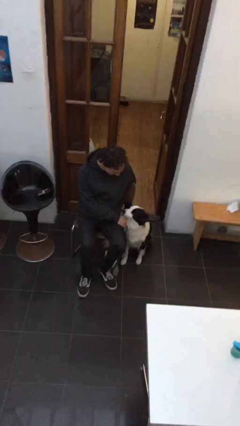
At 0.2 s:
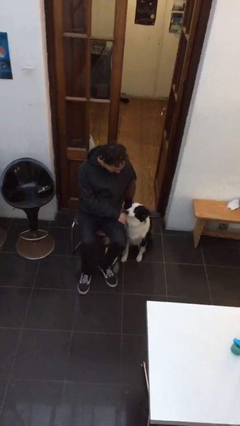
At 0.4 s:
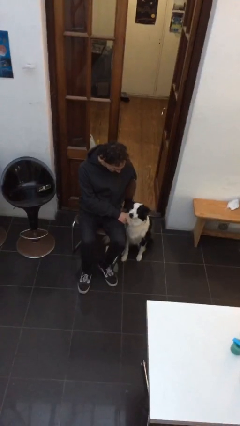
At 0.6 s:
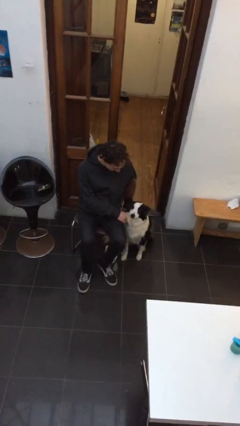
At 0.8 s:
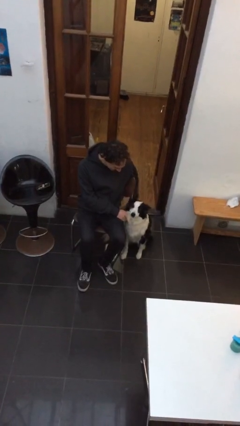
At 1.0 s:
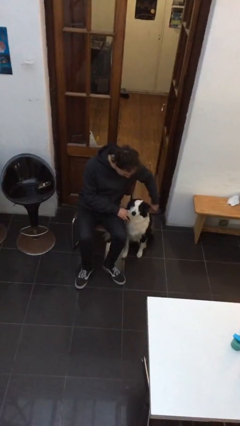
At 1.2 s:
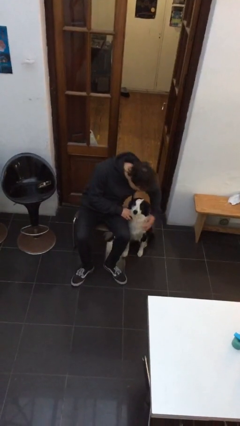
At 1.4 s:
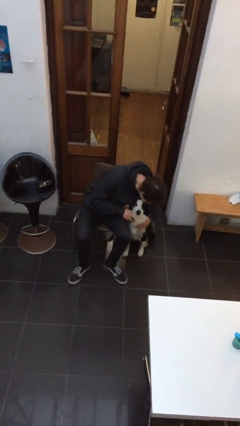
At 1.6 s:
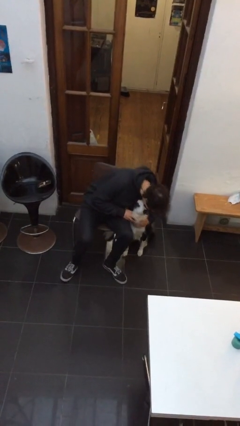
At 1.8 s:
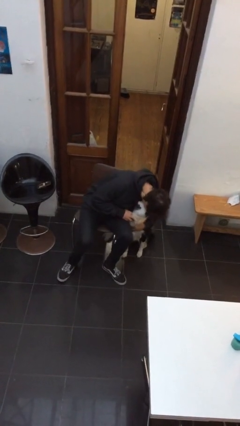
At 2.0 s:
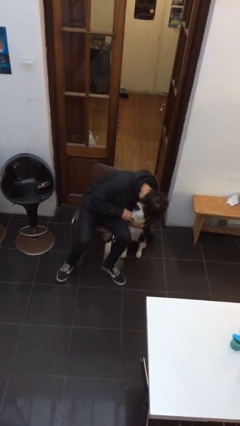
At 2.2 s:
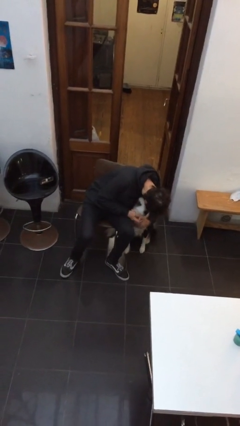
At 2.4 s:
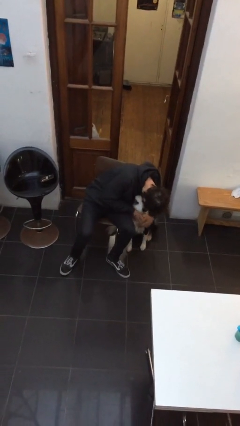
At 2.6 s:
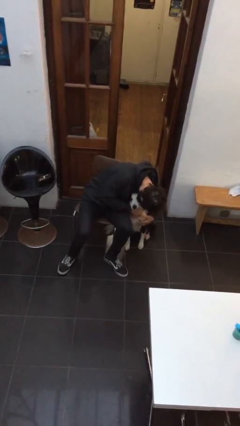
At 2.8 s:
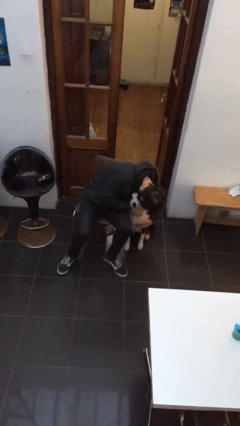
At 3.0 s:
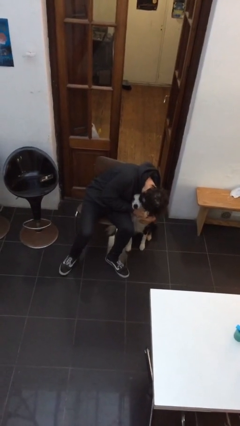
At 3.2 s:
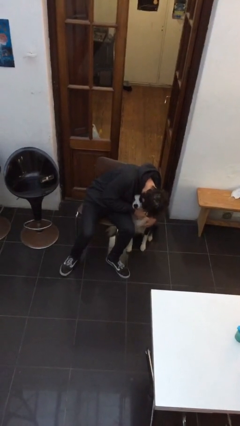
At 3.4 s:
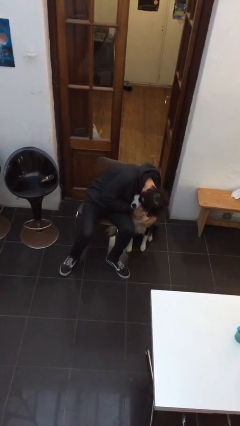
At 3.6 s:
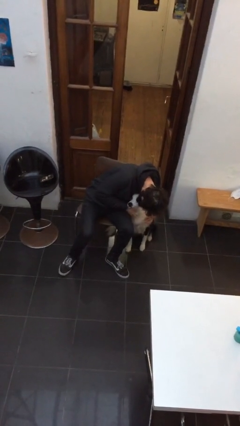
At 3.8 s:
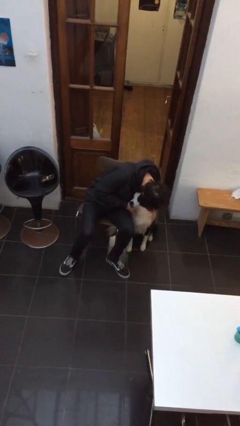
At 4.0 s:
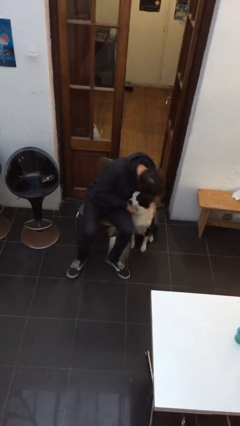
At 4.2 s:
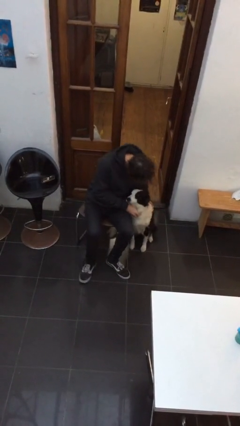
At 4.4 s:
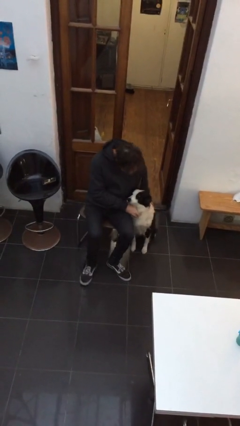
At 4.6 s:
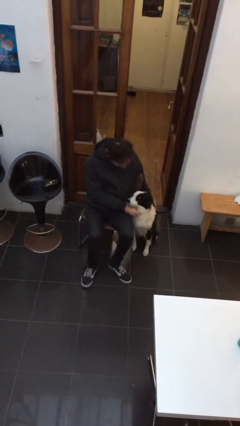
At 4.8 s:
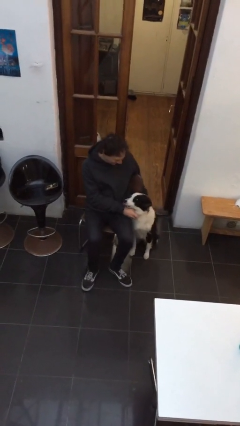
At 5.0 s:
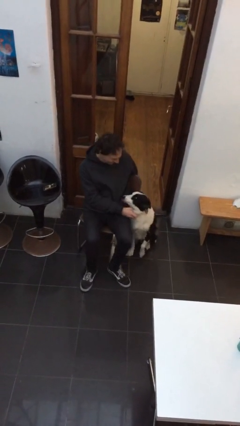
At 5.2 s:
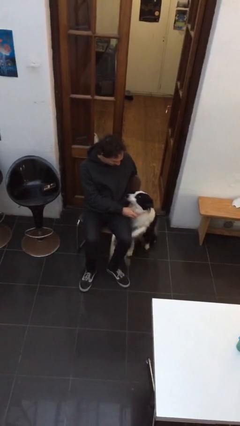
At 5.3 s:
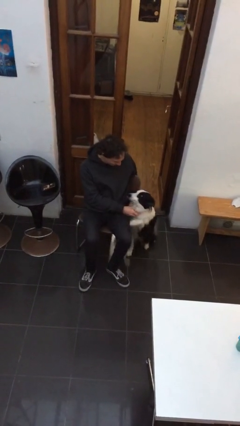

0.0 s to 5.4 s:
person hugs dog

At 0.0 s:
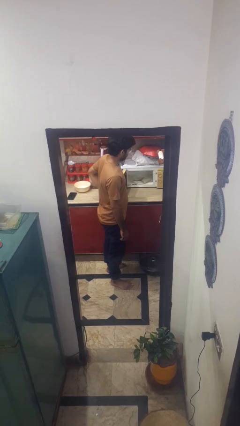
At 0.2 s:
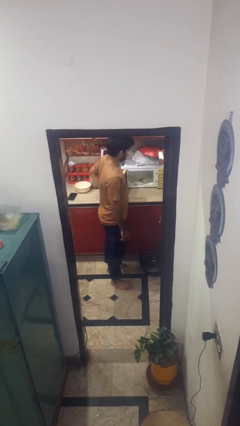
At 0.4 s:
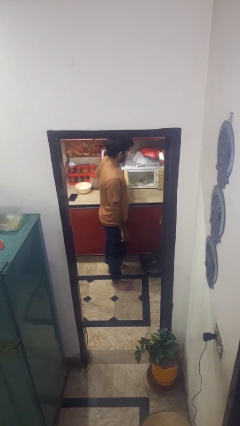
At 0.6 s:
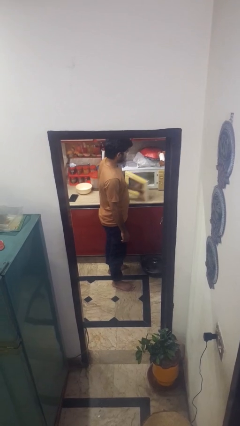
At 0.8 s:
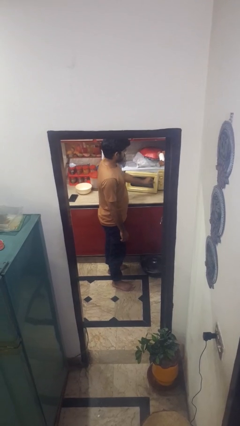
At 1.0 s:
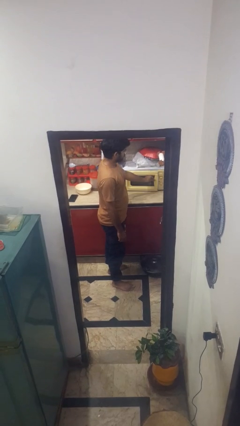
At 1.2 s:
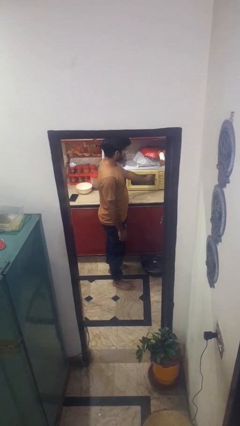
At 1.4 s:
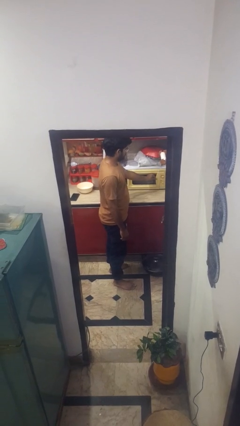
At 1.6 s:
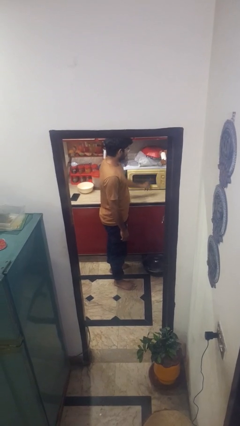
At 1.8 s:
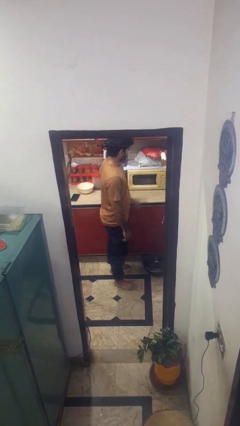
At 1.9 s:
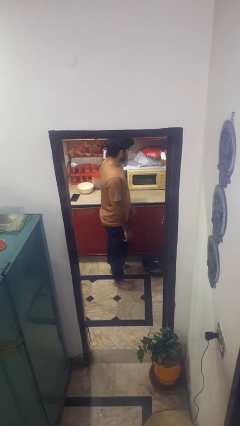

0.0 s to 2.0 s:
person closes microwave

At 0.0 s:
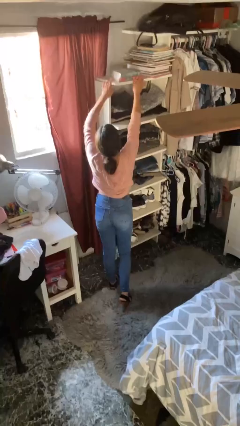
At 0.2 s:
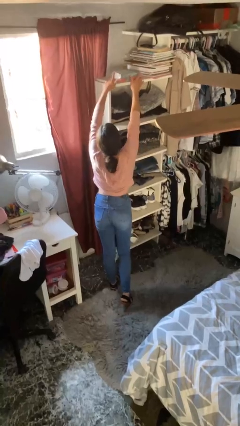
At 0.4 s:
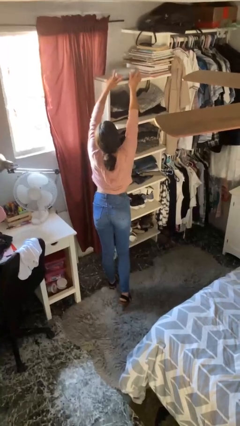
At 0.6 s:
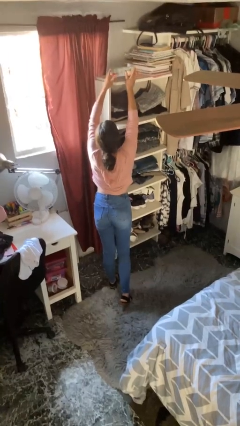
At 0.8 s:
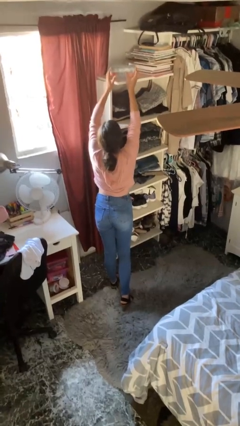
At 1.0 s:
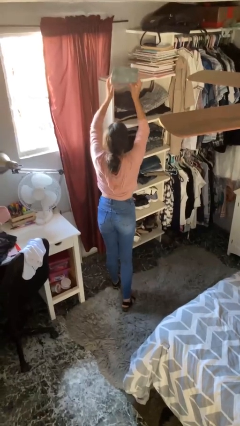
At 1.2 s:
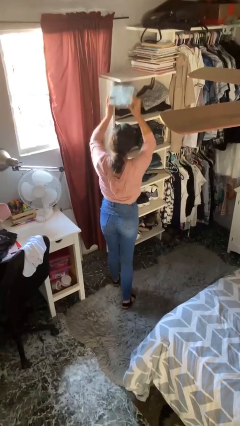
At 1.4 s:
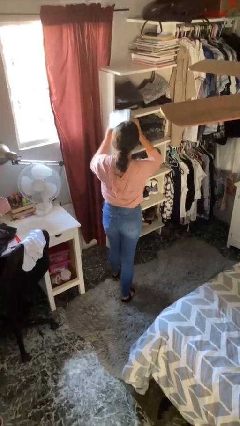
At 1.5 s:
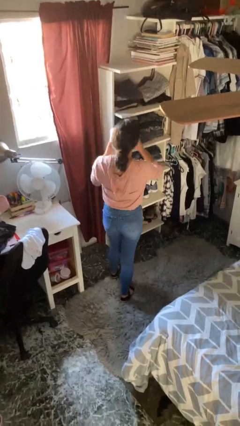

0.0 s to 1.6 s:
person picks up object from shelf

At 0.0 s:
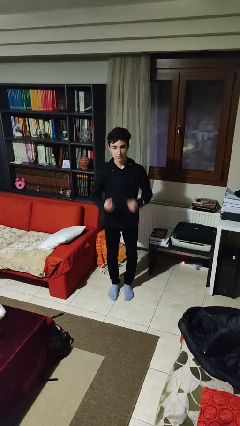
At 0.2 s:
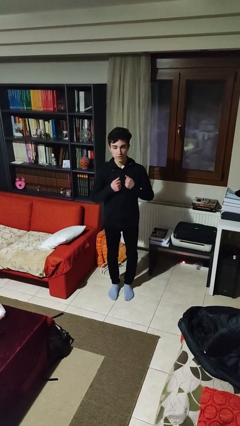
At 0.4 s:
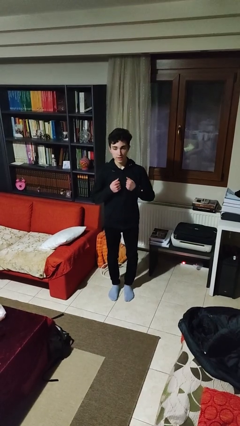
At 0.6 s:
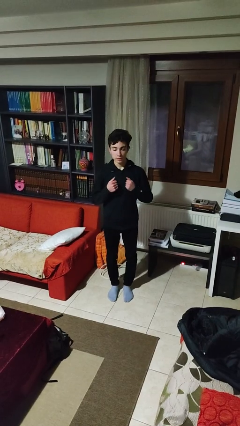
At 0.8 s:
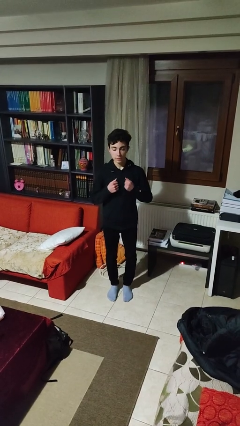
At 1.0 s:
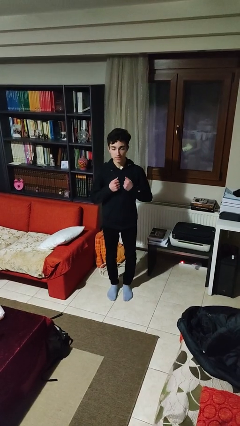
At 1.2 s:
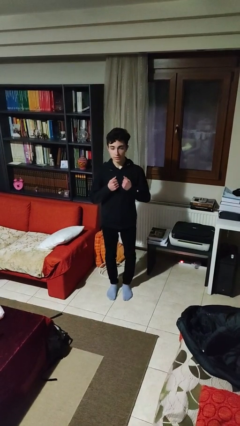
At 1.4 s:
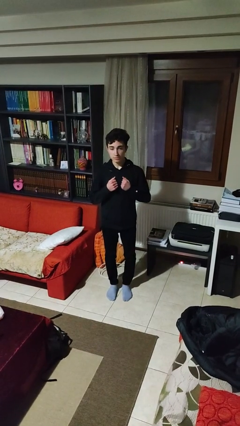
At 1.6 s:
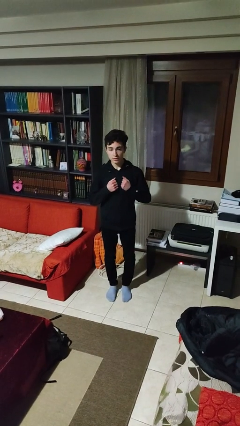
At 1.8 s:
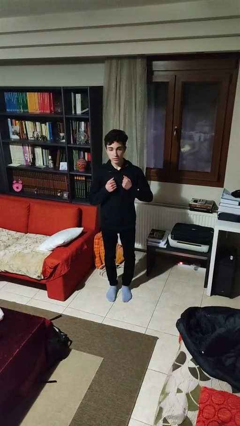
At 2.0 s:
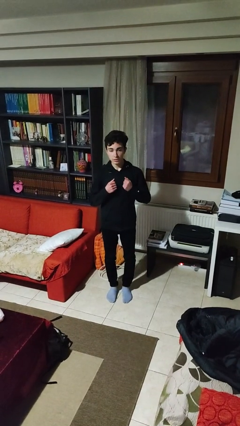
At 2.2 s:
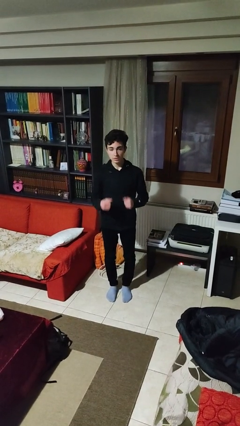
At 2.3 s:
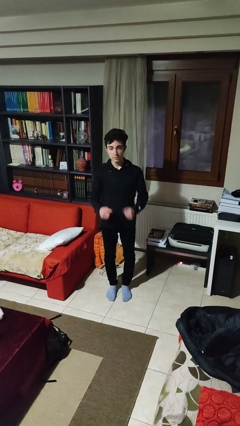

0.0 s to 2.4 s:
person drums on chest

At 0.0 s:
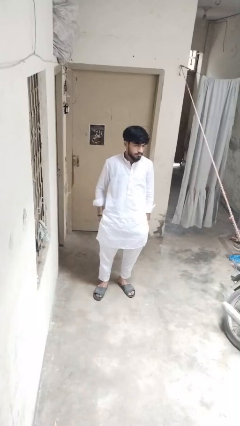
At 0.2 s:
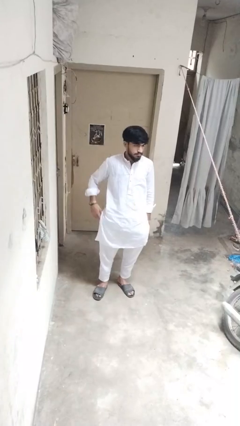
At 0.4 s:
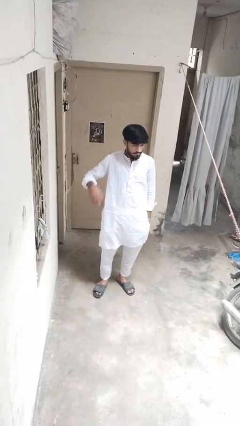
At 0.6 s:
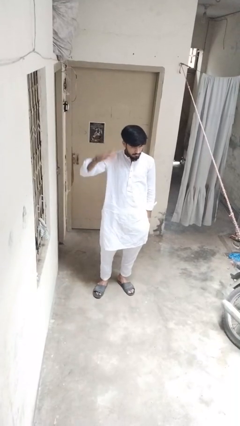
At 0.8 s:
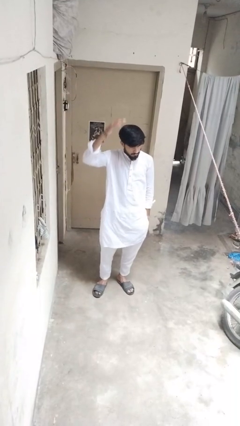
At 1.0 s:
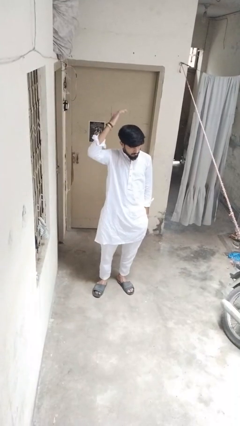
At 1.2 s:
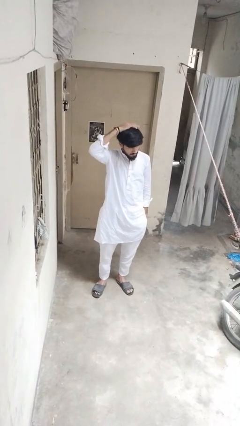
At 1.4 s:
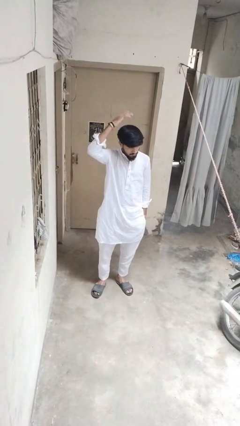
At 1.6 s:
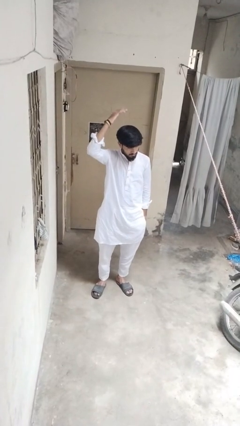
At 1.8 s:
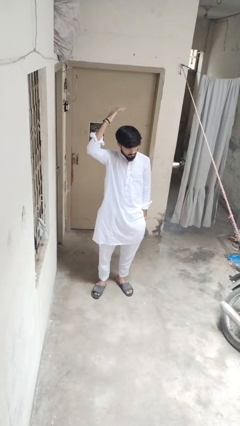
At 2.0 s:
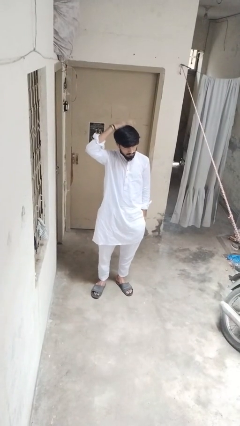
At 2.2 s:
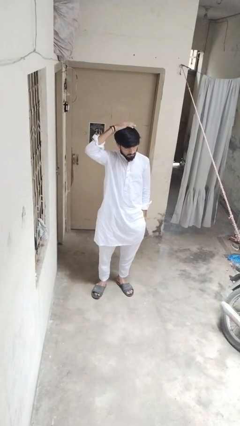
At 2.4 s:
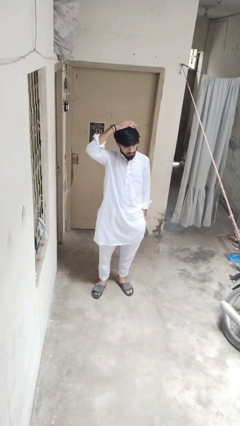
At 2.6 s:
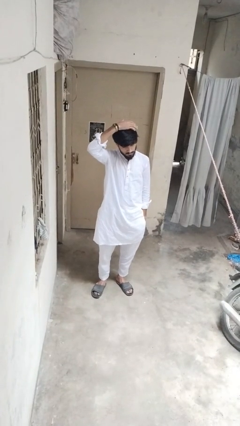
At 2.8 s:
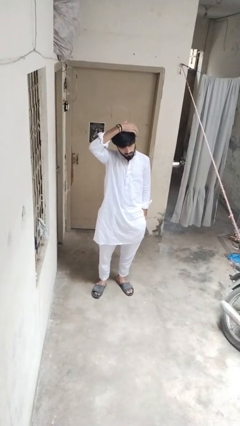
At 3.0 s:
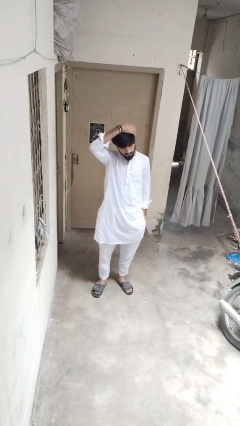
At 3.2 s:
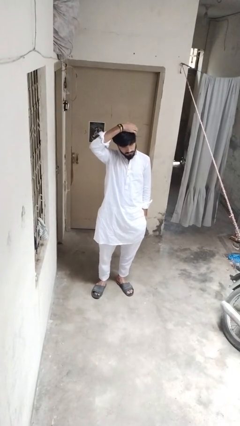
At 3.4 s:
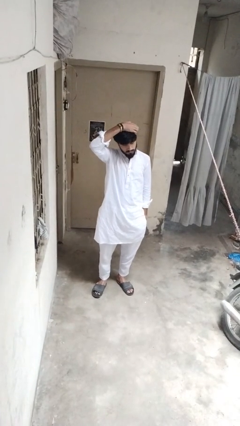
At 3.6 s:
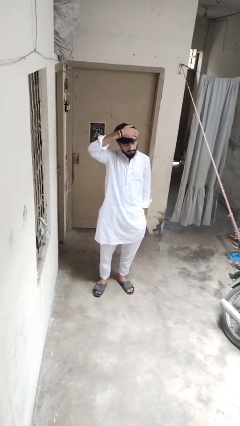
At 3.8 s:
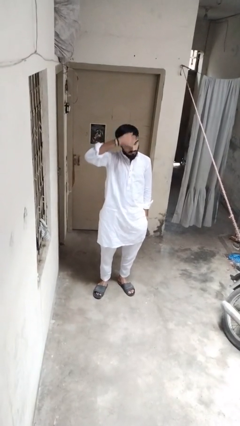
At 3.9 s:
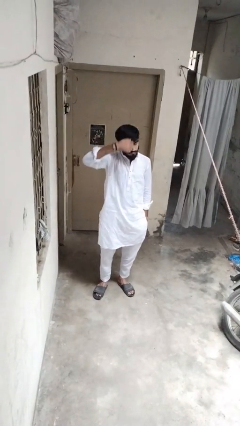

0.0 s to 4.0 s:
person pats head

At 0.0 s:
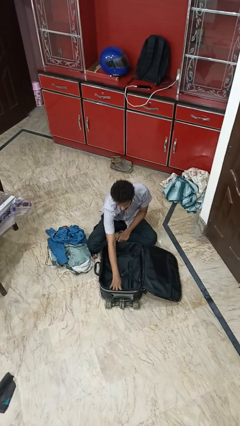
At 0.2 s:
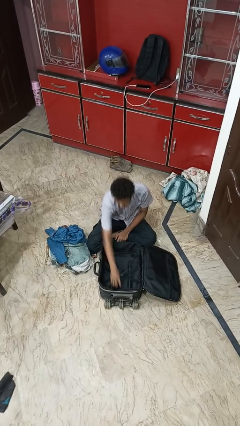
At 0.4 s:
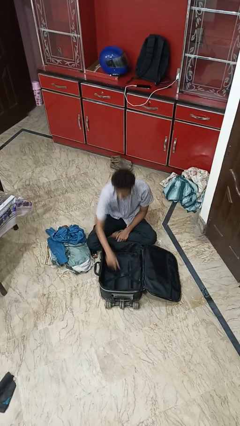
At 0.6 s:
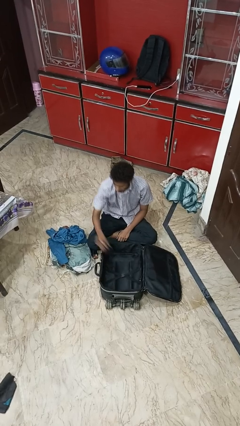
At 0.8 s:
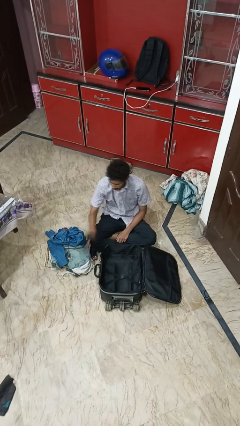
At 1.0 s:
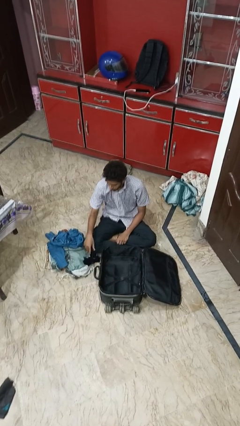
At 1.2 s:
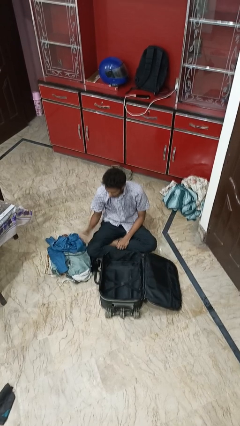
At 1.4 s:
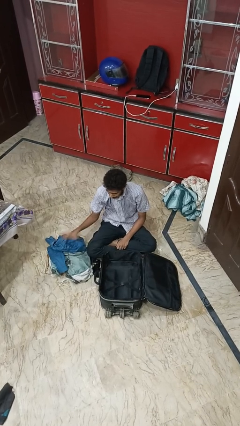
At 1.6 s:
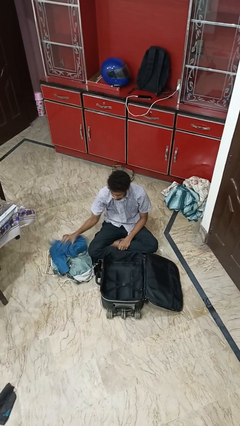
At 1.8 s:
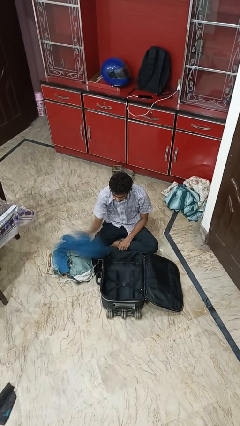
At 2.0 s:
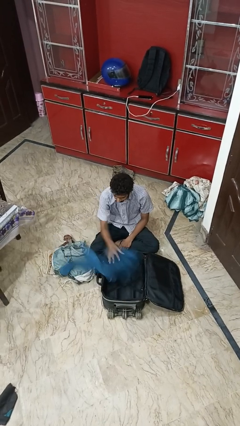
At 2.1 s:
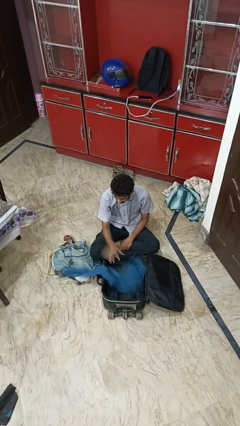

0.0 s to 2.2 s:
person unloads clothes from suitcase
